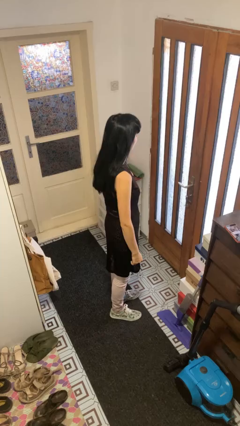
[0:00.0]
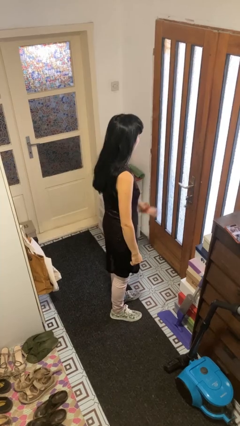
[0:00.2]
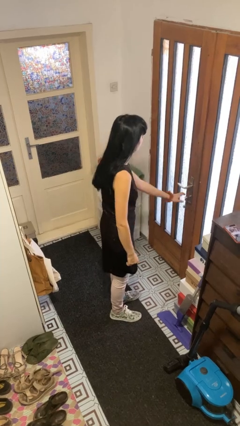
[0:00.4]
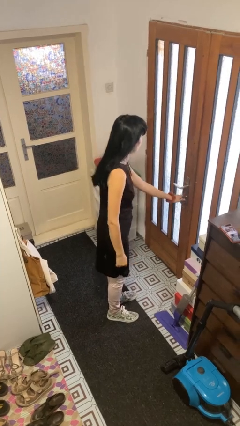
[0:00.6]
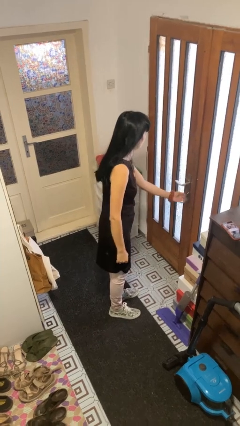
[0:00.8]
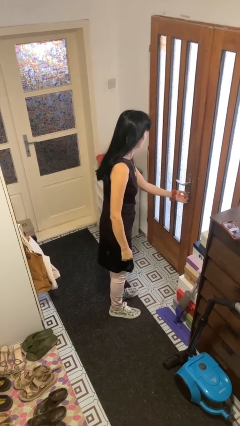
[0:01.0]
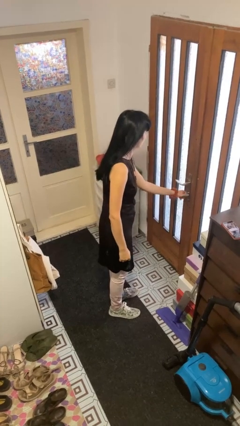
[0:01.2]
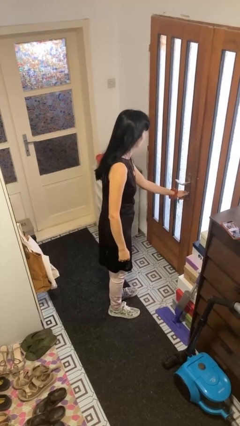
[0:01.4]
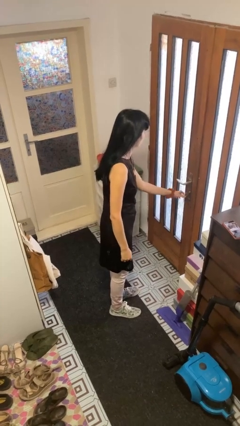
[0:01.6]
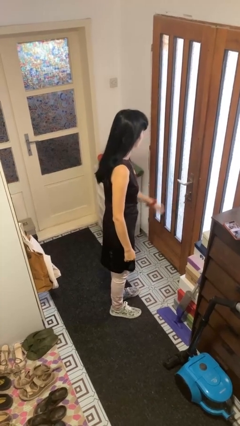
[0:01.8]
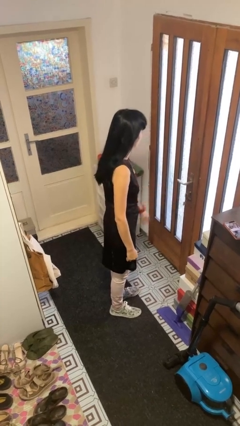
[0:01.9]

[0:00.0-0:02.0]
person unlocks door with keys

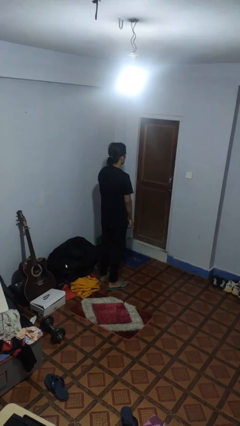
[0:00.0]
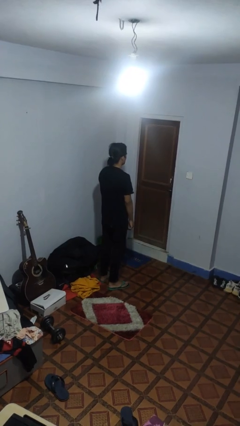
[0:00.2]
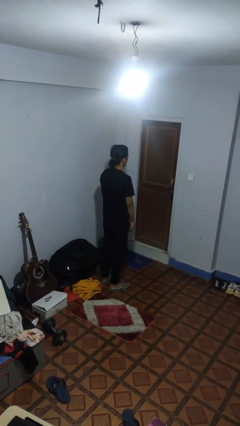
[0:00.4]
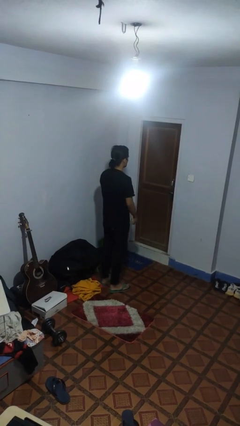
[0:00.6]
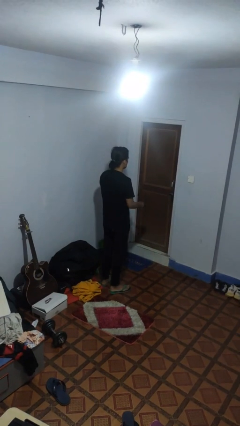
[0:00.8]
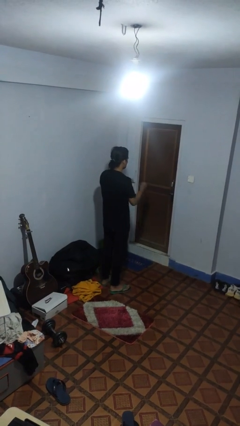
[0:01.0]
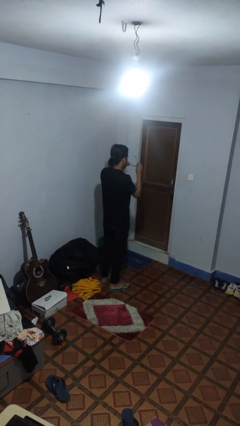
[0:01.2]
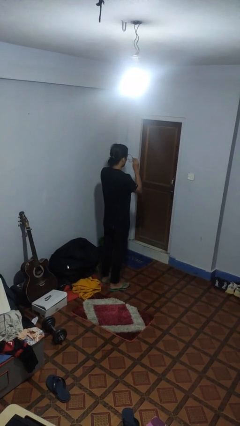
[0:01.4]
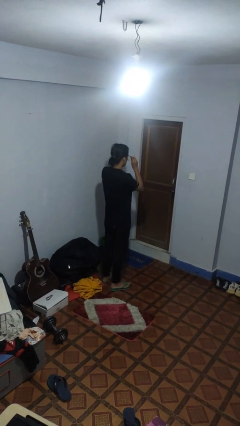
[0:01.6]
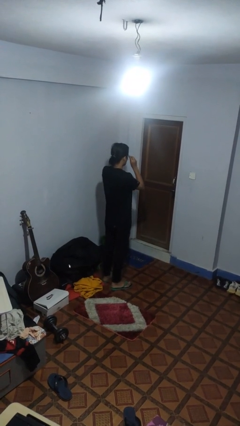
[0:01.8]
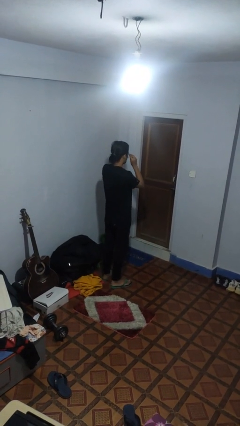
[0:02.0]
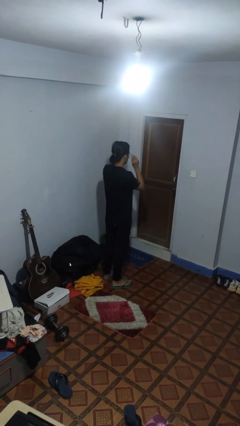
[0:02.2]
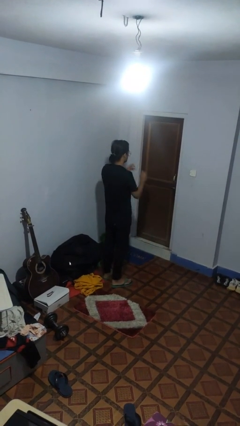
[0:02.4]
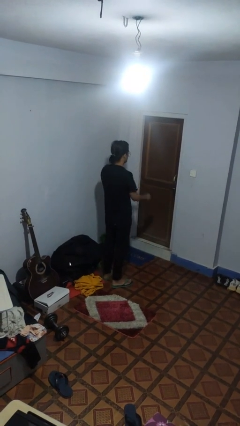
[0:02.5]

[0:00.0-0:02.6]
person puts on glasses

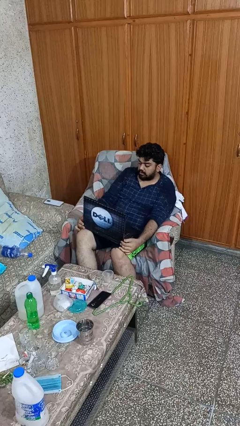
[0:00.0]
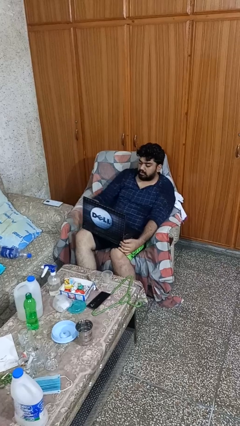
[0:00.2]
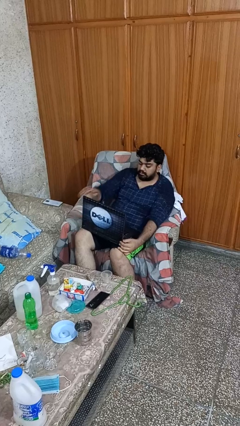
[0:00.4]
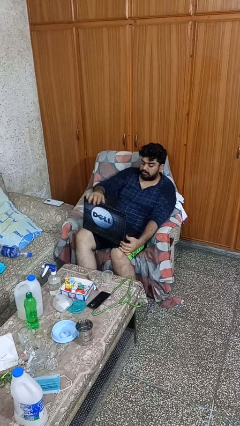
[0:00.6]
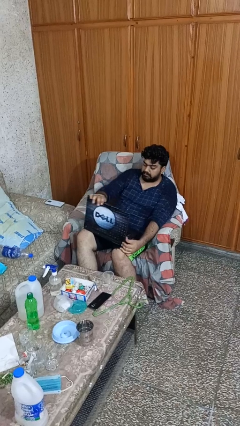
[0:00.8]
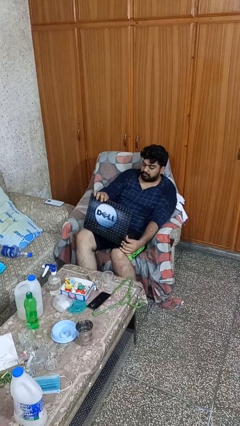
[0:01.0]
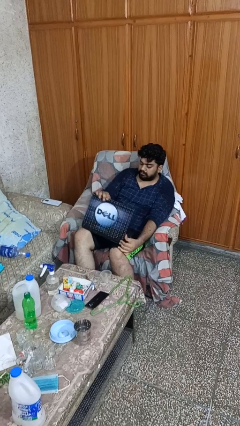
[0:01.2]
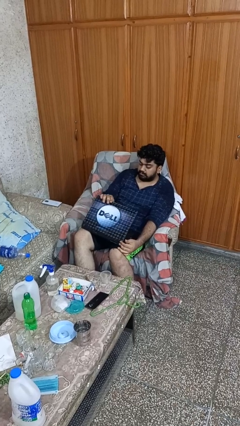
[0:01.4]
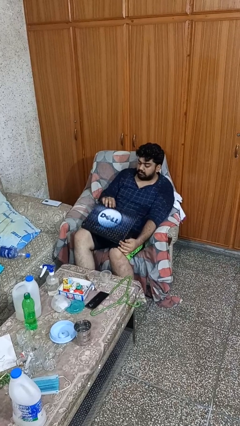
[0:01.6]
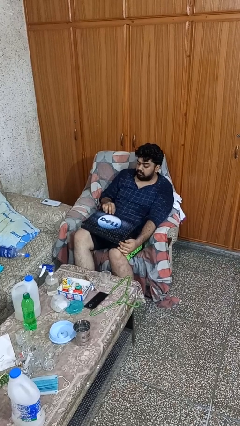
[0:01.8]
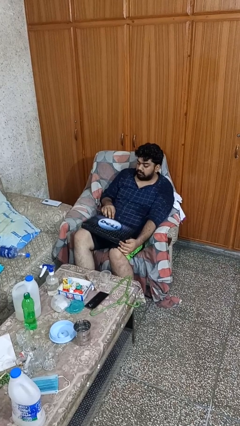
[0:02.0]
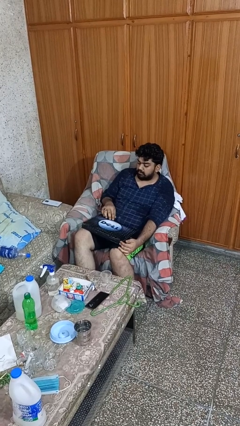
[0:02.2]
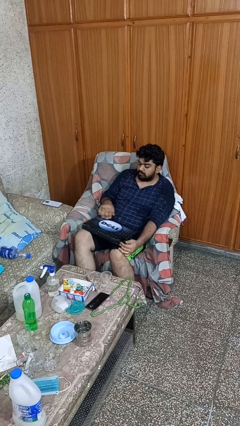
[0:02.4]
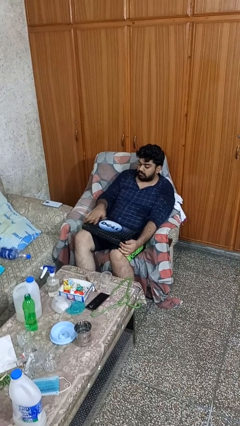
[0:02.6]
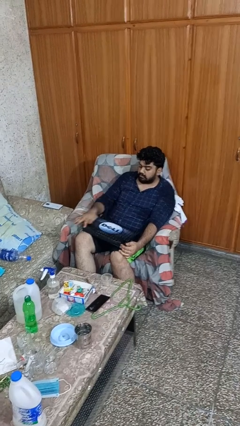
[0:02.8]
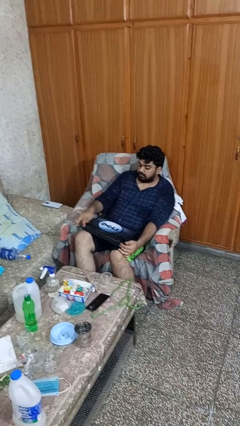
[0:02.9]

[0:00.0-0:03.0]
person closes laptop

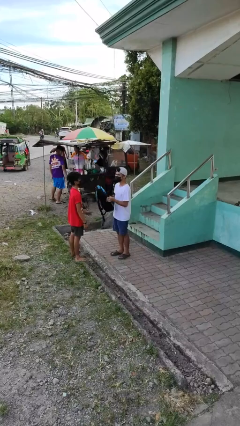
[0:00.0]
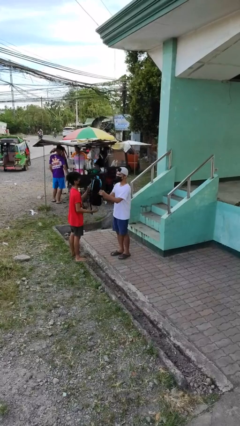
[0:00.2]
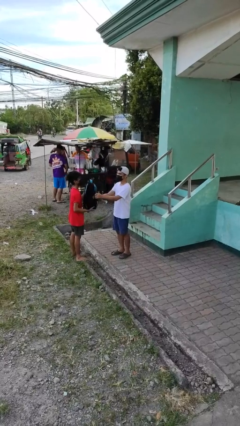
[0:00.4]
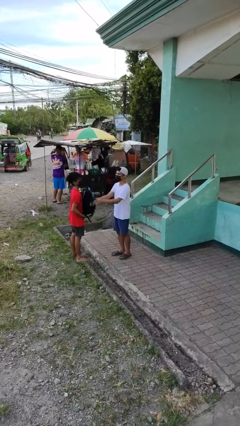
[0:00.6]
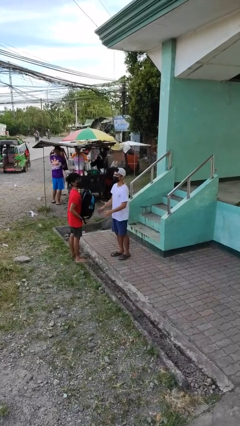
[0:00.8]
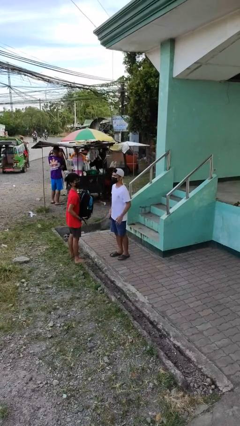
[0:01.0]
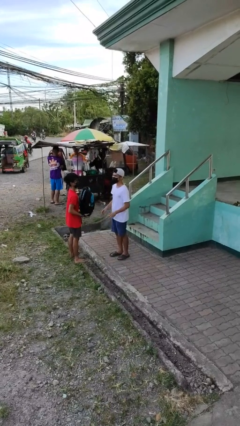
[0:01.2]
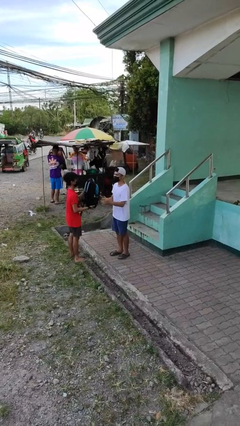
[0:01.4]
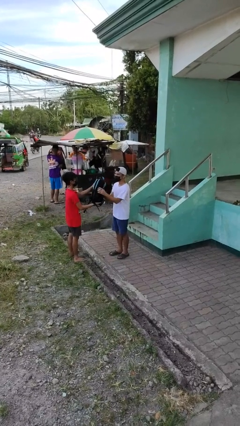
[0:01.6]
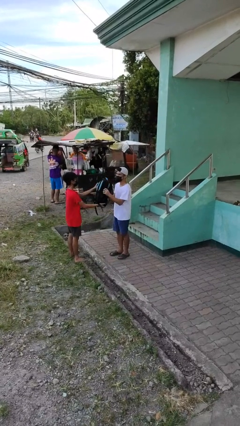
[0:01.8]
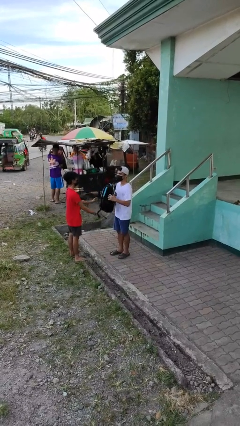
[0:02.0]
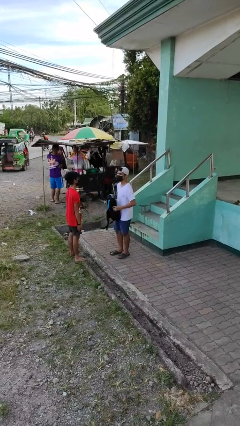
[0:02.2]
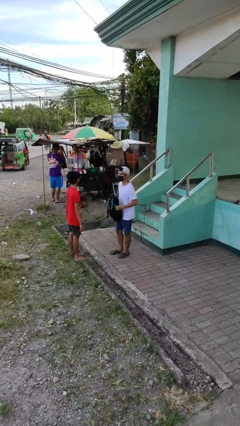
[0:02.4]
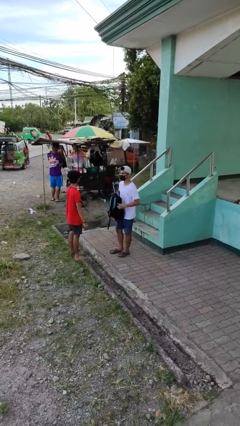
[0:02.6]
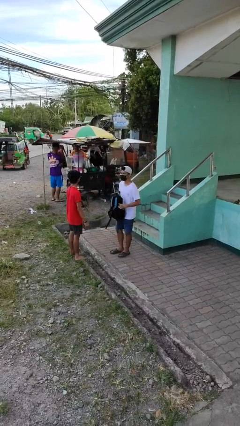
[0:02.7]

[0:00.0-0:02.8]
person transfers object to person

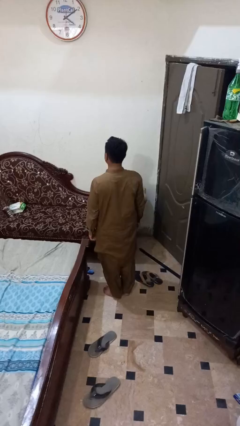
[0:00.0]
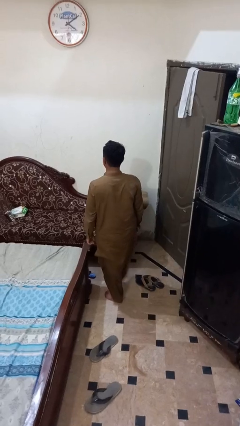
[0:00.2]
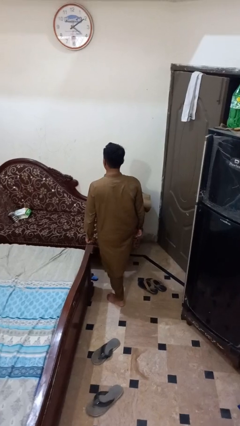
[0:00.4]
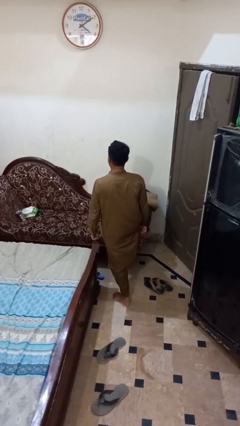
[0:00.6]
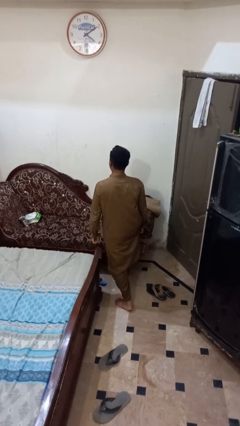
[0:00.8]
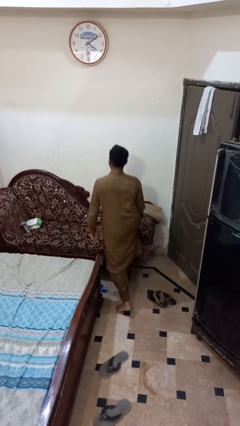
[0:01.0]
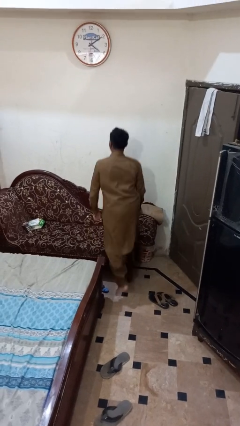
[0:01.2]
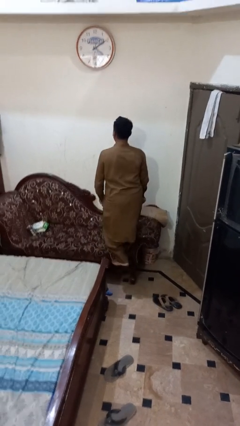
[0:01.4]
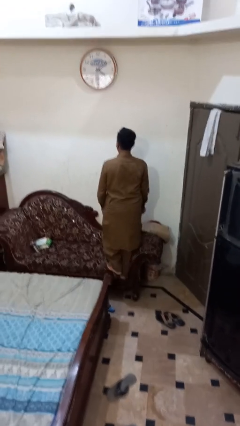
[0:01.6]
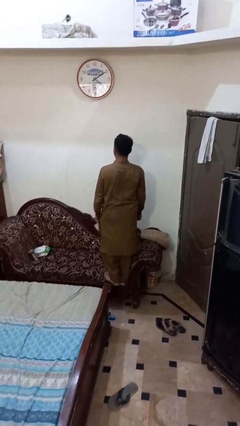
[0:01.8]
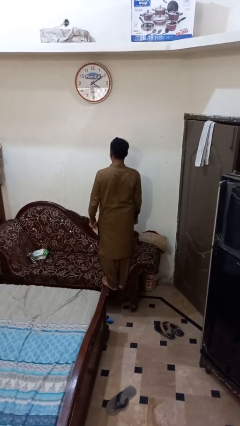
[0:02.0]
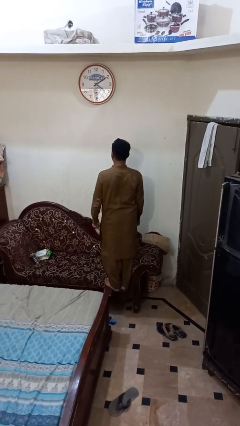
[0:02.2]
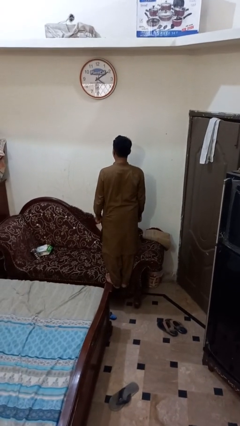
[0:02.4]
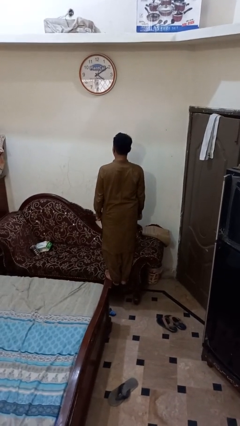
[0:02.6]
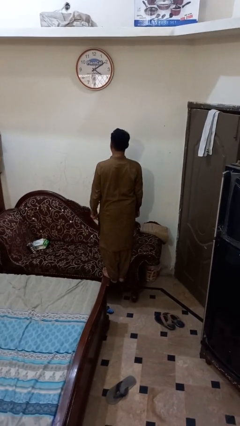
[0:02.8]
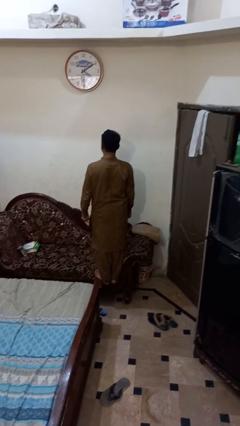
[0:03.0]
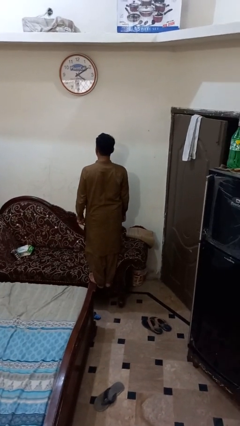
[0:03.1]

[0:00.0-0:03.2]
person climbs on couch

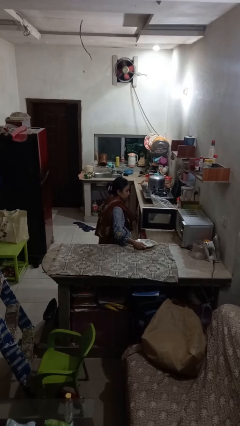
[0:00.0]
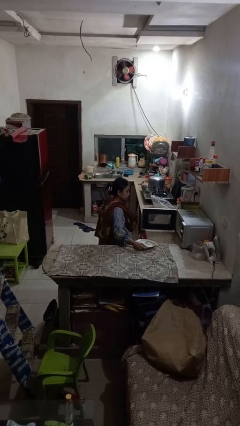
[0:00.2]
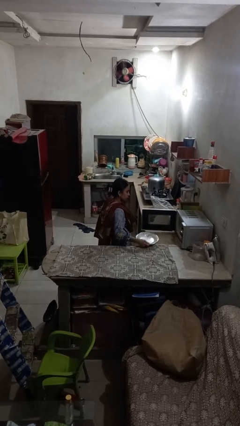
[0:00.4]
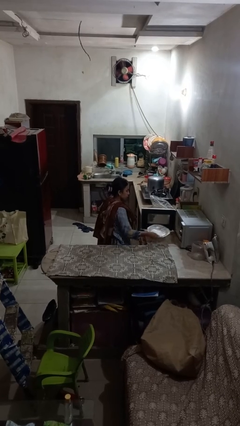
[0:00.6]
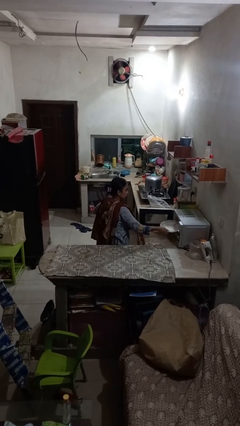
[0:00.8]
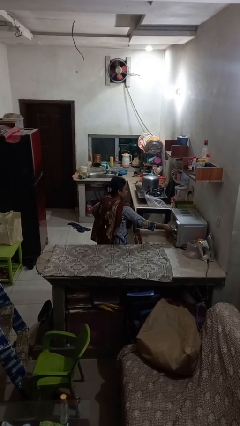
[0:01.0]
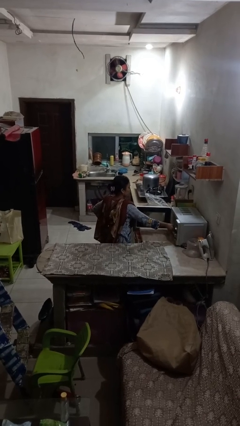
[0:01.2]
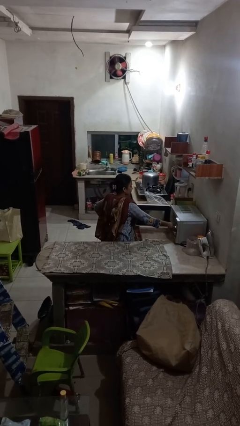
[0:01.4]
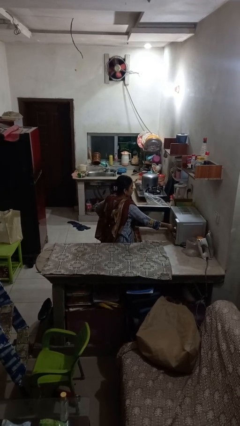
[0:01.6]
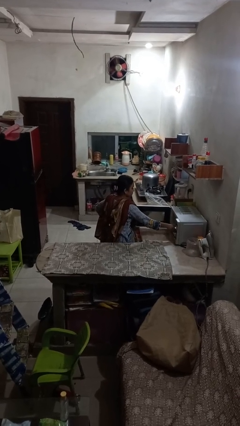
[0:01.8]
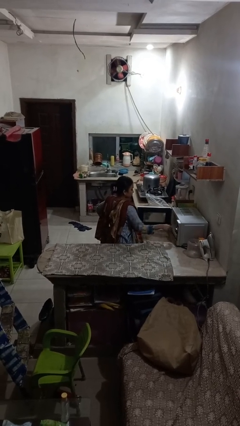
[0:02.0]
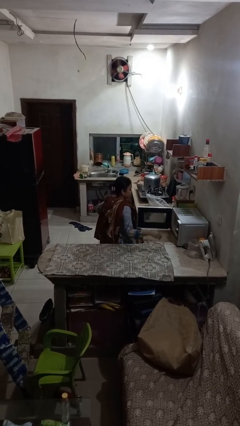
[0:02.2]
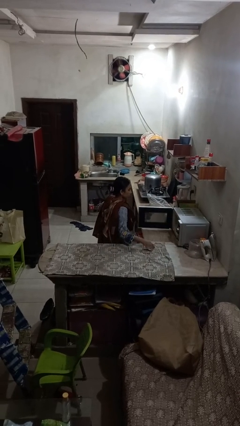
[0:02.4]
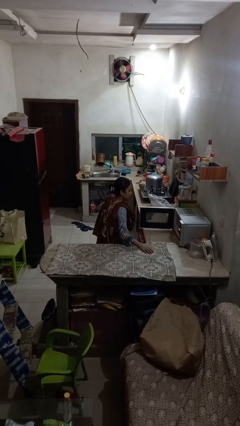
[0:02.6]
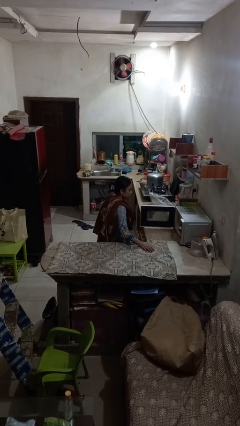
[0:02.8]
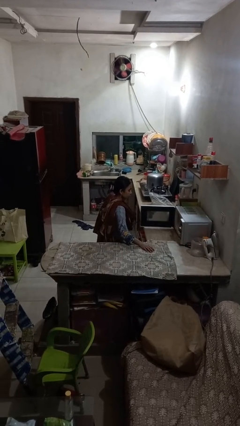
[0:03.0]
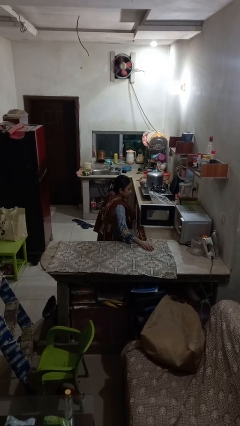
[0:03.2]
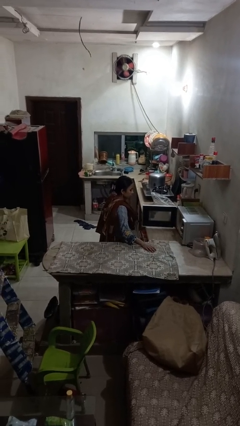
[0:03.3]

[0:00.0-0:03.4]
person puts object into microwave

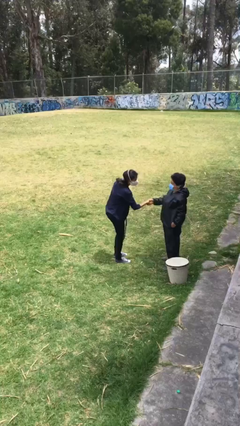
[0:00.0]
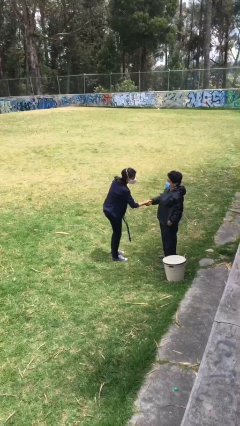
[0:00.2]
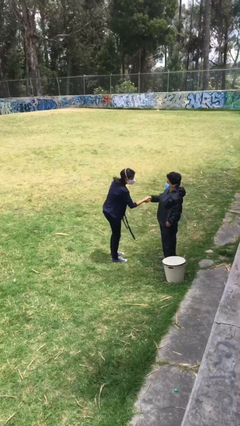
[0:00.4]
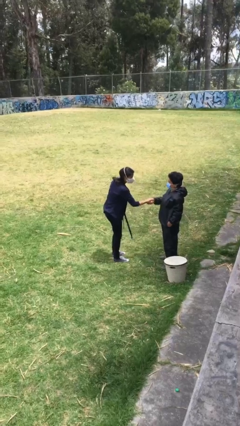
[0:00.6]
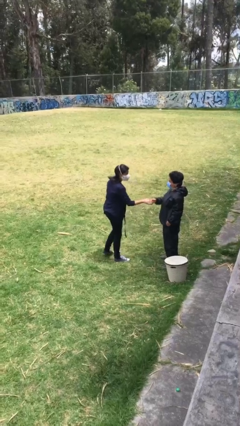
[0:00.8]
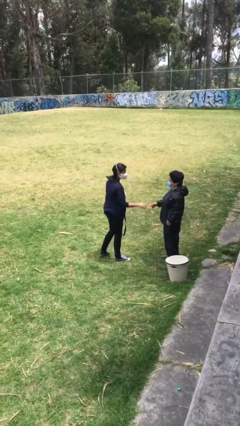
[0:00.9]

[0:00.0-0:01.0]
person shakes hand
